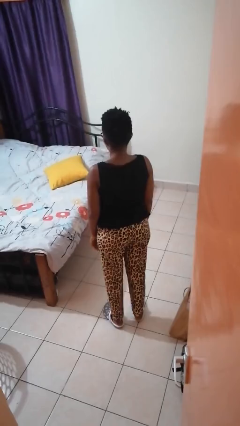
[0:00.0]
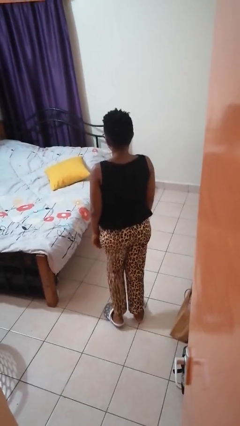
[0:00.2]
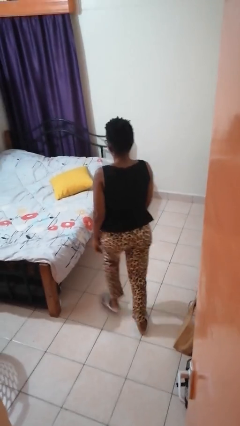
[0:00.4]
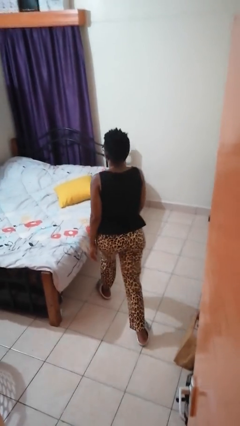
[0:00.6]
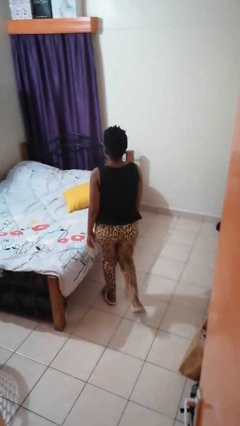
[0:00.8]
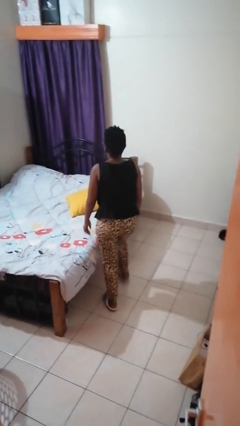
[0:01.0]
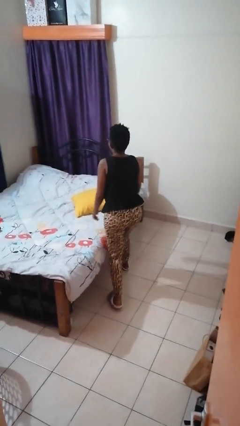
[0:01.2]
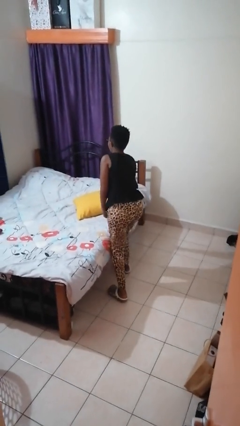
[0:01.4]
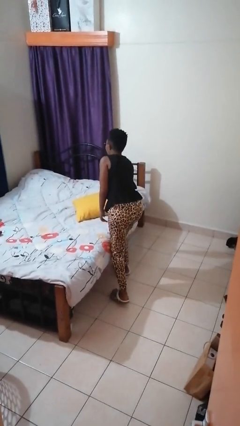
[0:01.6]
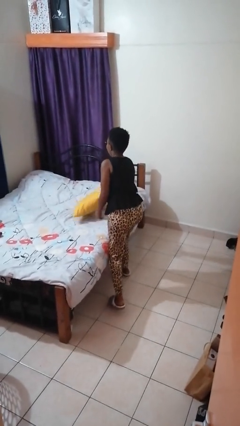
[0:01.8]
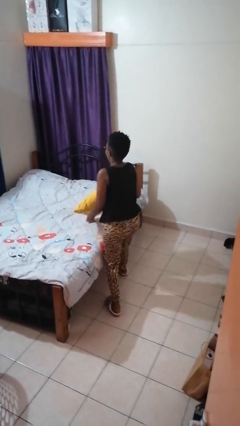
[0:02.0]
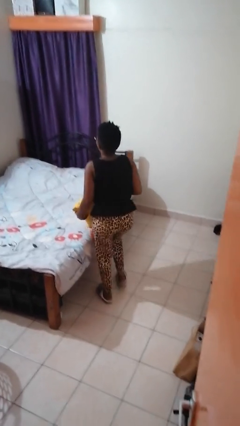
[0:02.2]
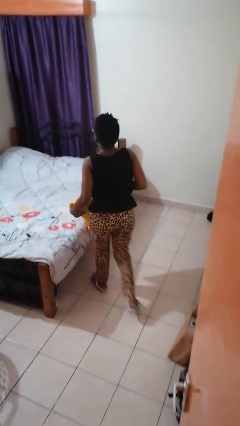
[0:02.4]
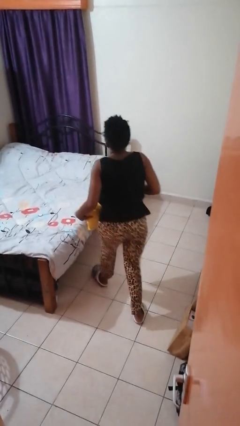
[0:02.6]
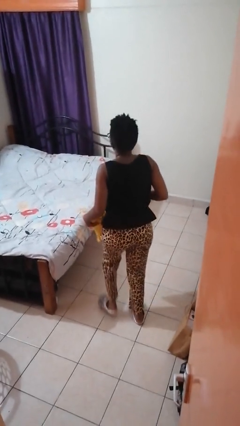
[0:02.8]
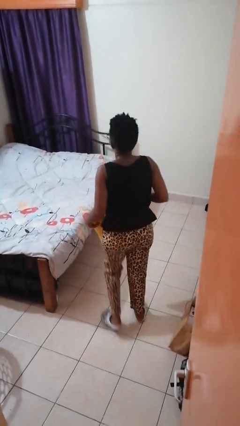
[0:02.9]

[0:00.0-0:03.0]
person picks up object from bed

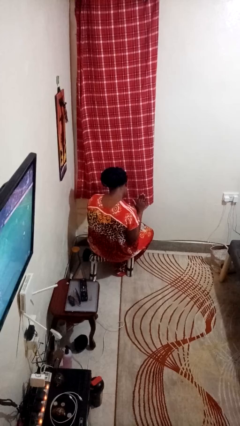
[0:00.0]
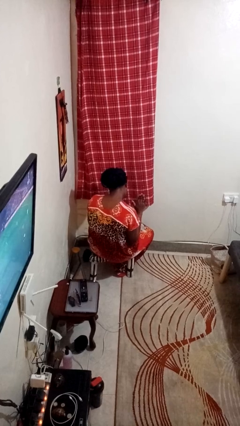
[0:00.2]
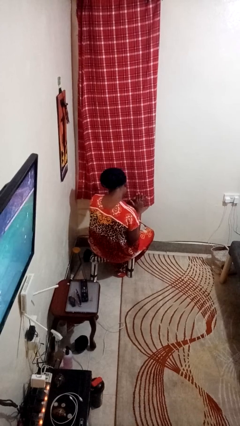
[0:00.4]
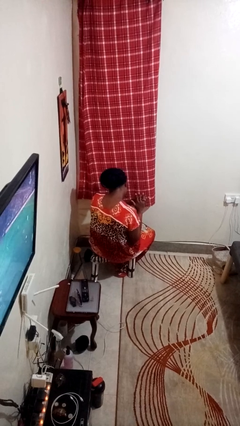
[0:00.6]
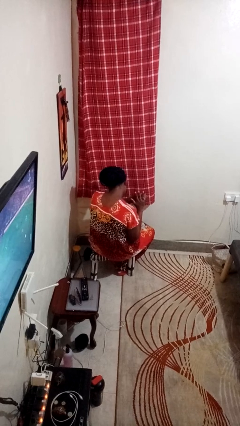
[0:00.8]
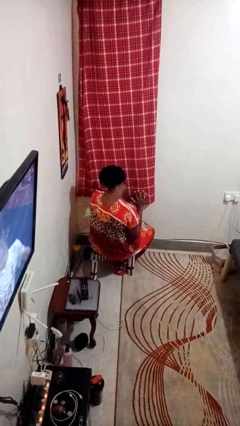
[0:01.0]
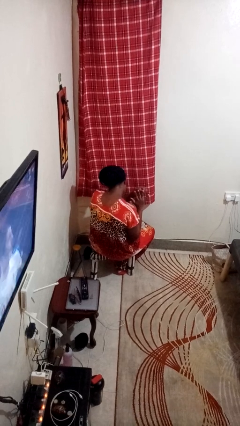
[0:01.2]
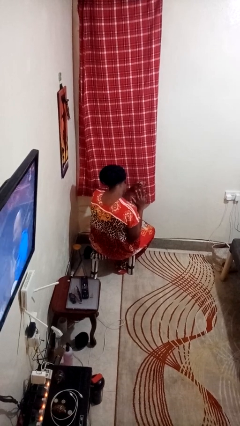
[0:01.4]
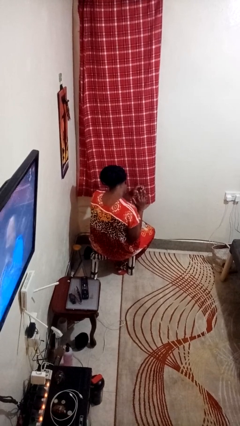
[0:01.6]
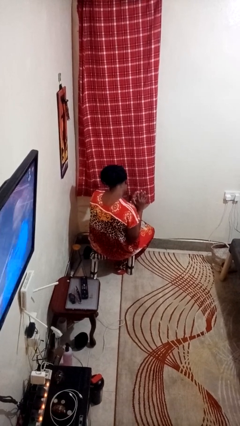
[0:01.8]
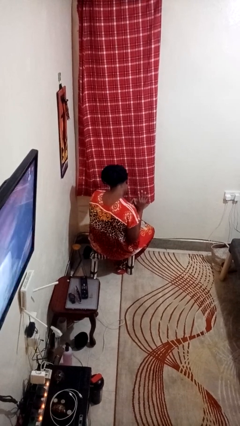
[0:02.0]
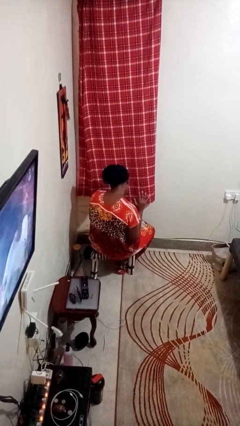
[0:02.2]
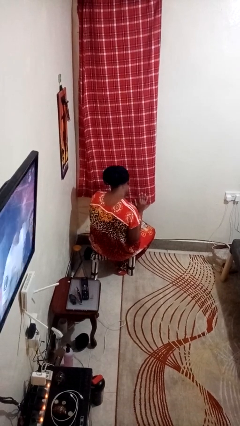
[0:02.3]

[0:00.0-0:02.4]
person takes off ring

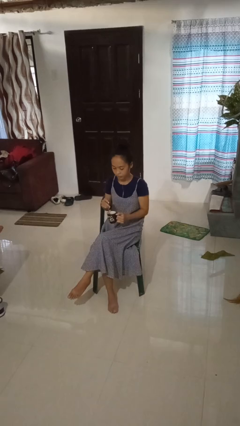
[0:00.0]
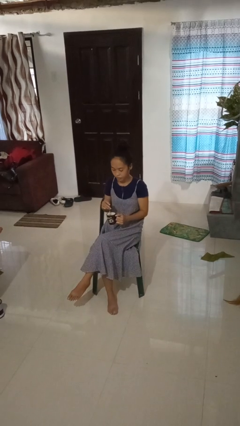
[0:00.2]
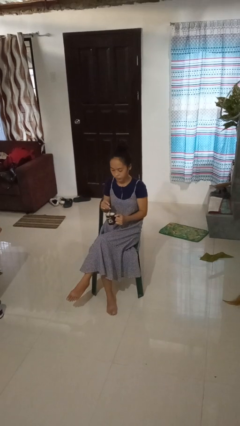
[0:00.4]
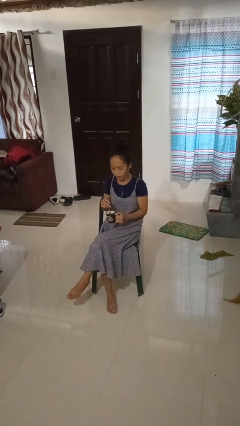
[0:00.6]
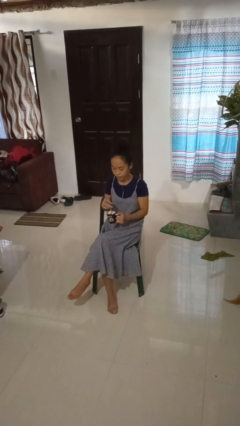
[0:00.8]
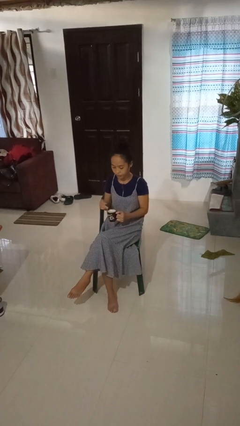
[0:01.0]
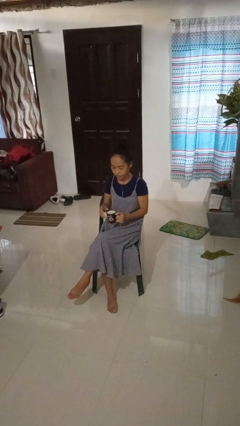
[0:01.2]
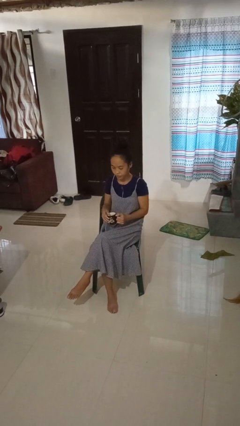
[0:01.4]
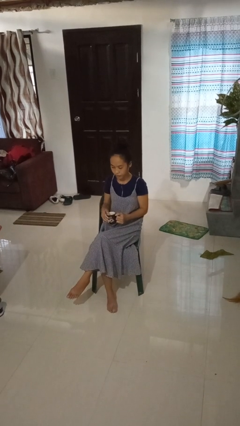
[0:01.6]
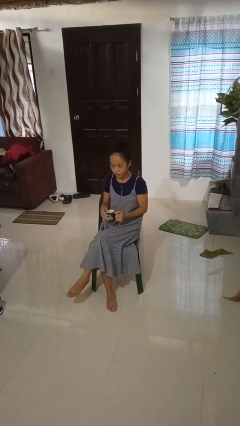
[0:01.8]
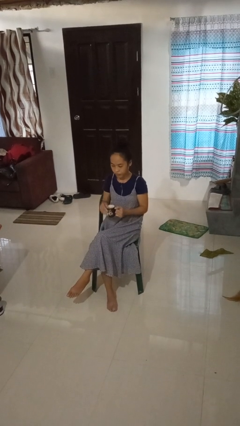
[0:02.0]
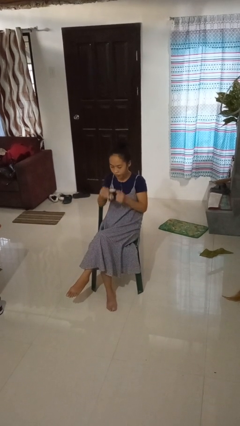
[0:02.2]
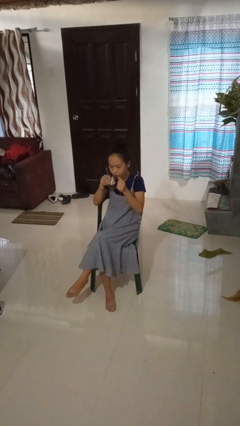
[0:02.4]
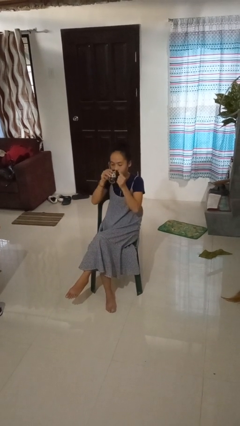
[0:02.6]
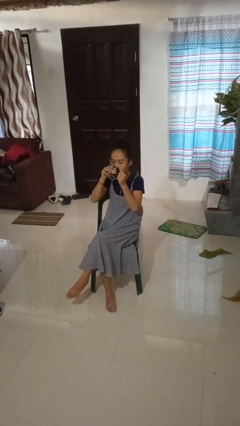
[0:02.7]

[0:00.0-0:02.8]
person stirs mug

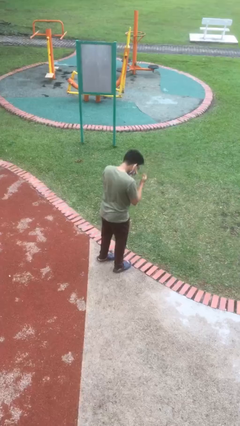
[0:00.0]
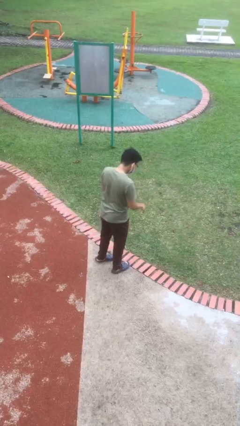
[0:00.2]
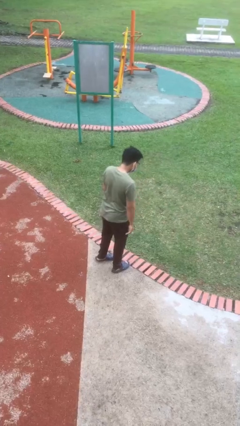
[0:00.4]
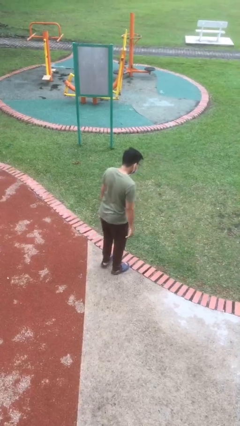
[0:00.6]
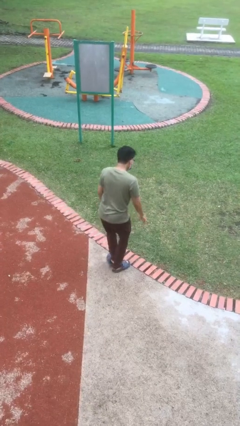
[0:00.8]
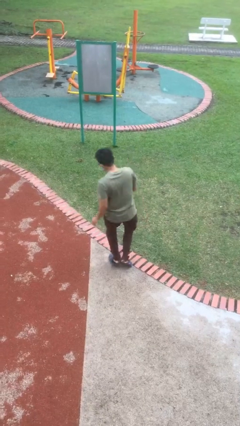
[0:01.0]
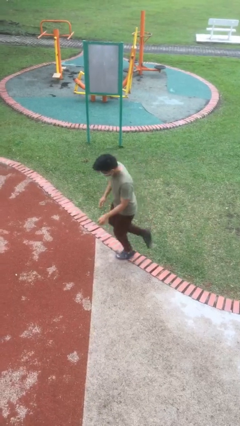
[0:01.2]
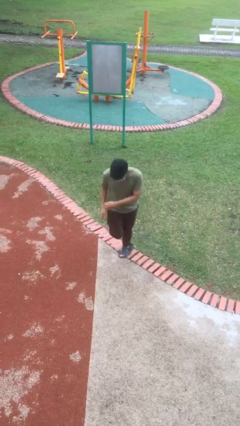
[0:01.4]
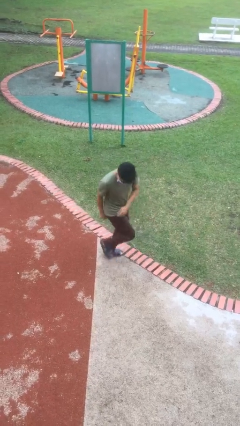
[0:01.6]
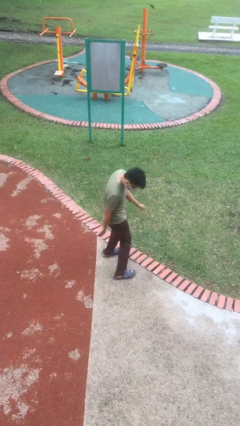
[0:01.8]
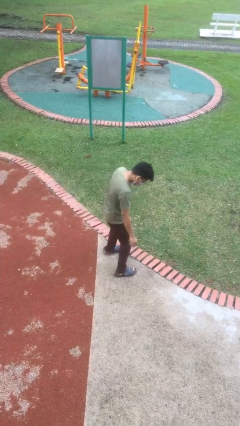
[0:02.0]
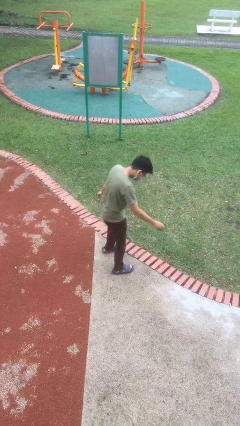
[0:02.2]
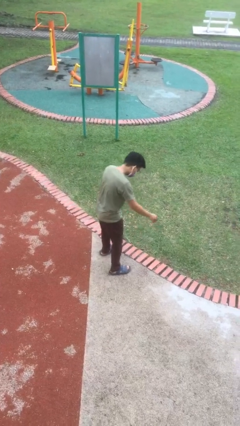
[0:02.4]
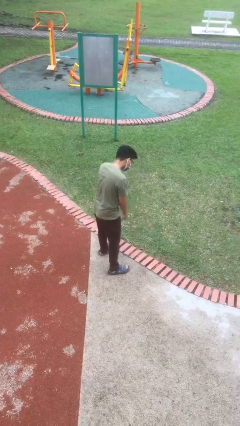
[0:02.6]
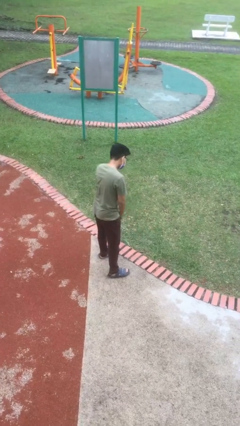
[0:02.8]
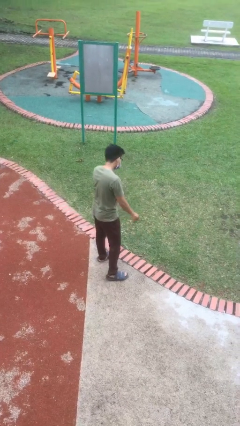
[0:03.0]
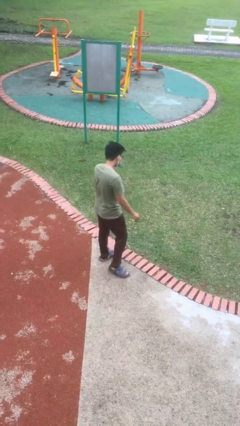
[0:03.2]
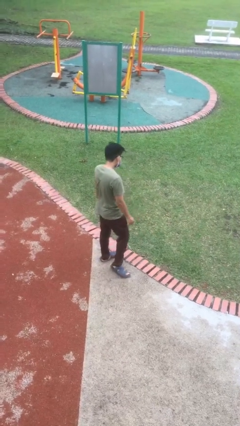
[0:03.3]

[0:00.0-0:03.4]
person twirls

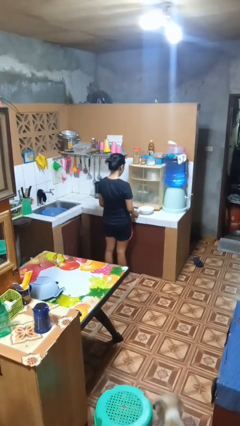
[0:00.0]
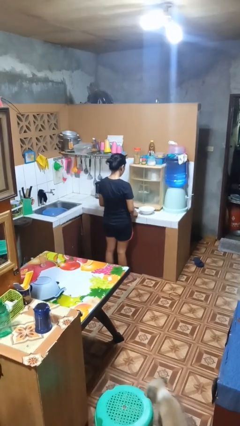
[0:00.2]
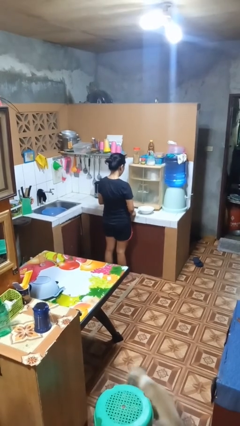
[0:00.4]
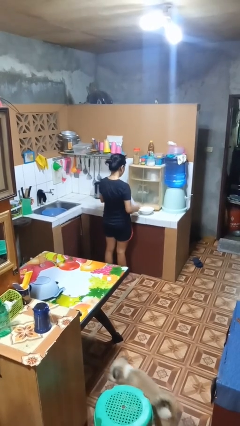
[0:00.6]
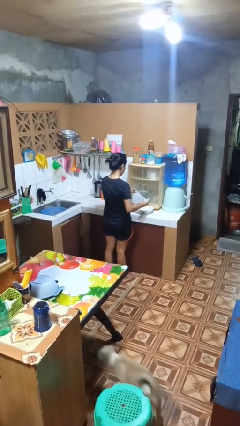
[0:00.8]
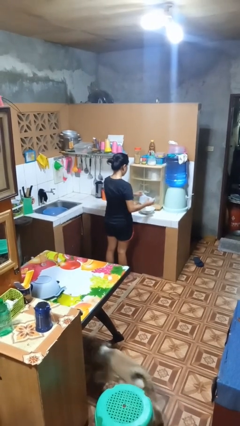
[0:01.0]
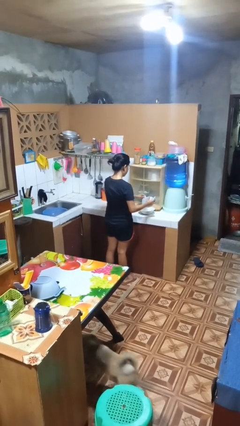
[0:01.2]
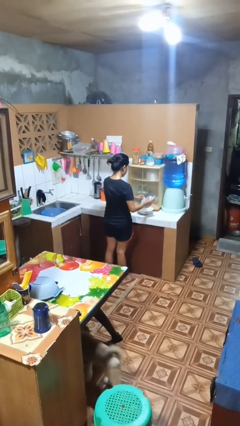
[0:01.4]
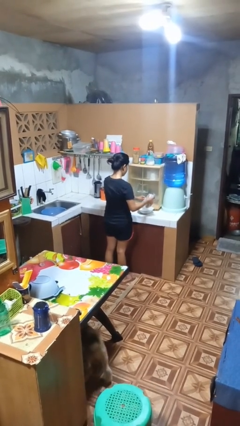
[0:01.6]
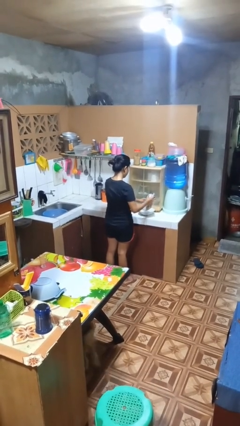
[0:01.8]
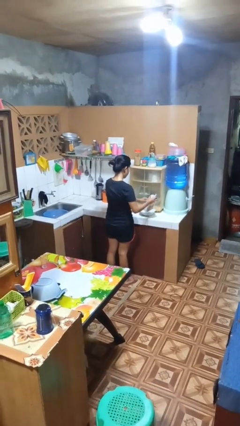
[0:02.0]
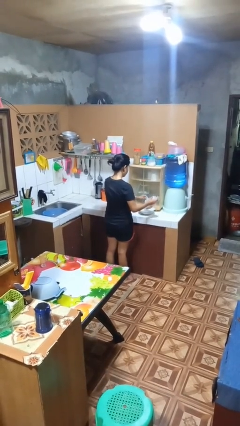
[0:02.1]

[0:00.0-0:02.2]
person pours into bowl

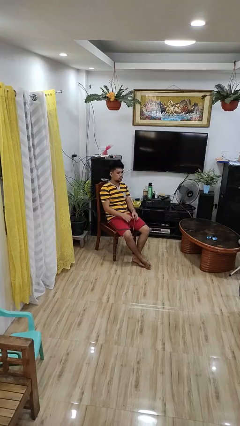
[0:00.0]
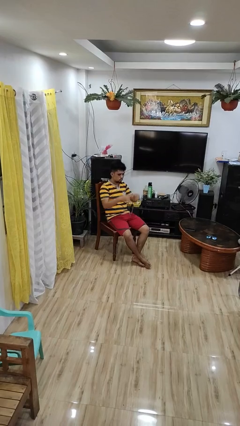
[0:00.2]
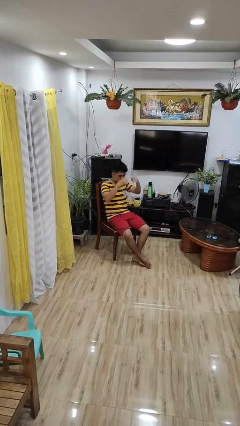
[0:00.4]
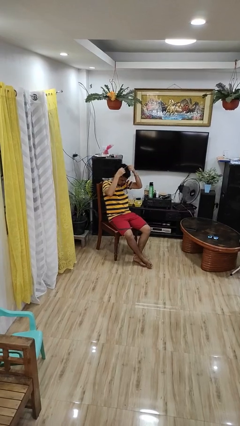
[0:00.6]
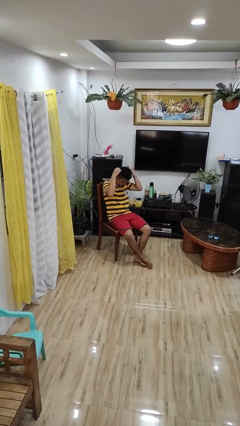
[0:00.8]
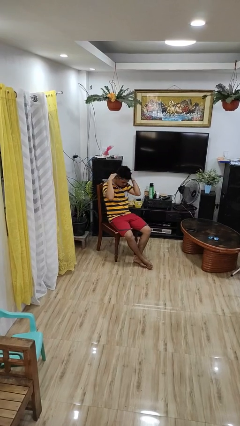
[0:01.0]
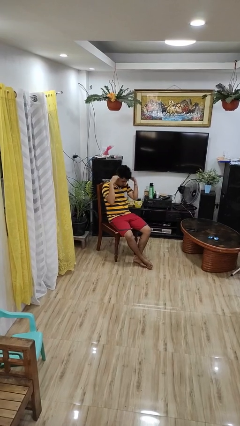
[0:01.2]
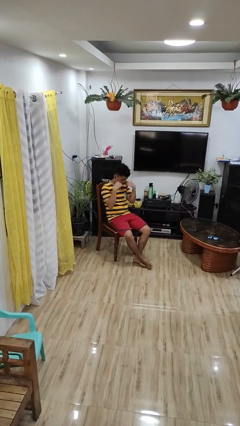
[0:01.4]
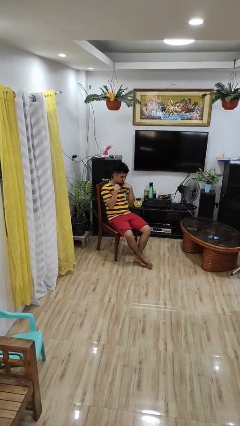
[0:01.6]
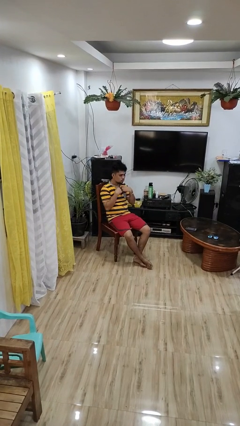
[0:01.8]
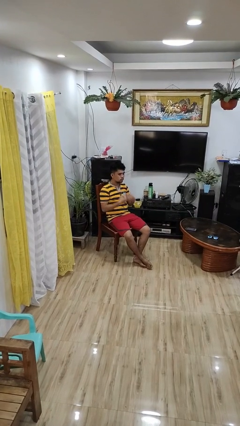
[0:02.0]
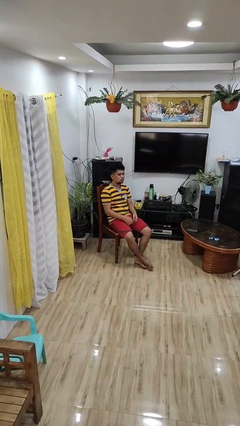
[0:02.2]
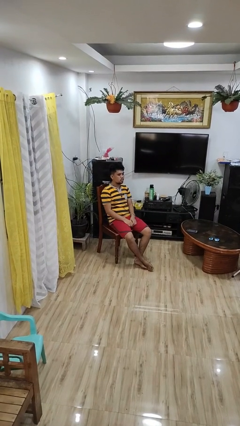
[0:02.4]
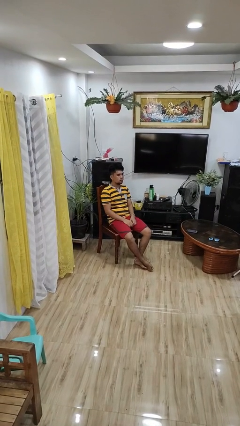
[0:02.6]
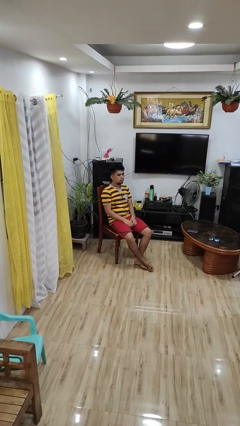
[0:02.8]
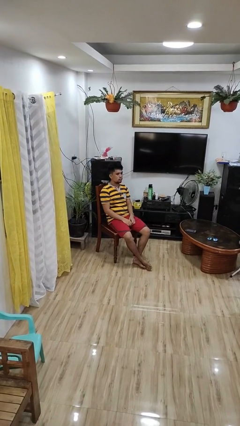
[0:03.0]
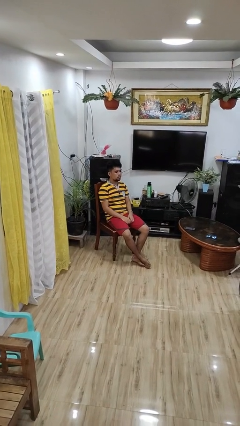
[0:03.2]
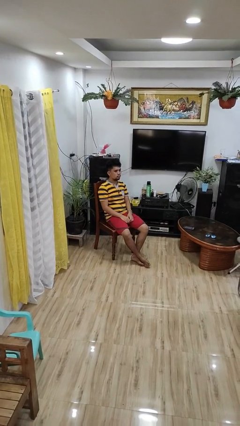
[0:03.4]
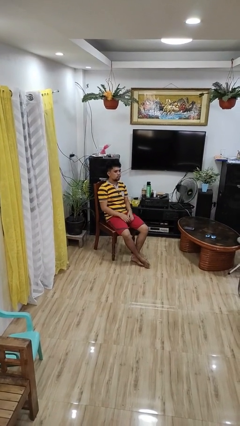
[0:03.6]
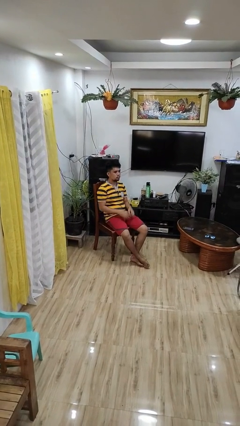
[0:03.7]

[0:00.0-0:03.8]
person puts on necklace
